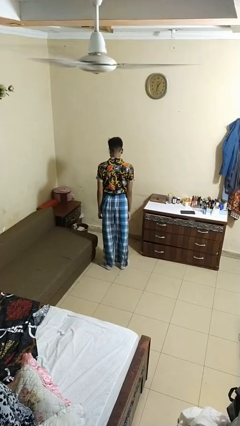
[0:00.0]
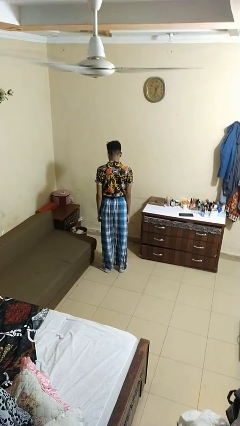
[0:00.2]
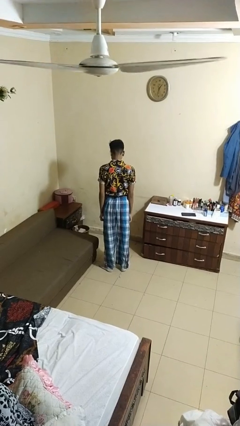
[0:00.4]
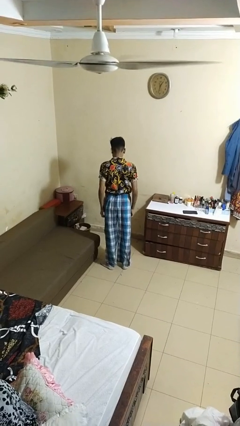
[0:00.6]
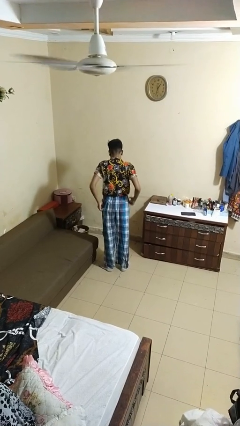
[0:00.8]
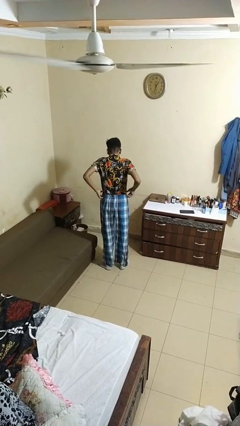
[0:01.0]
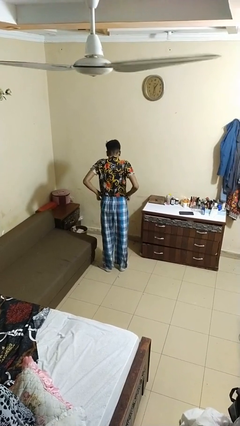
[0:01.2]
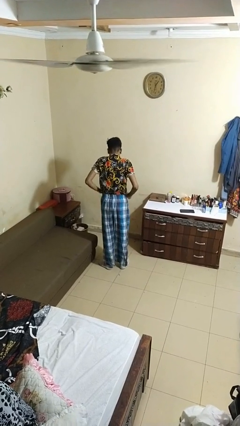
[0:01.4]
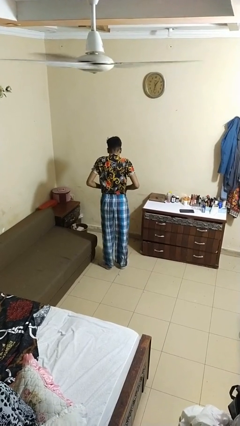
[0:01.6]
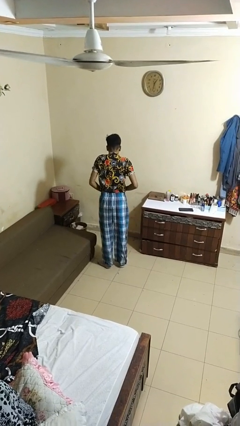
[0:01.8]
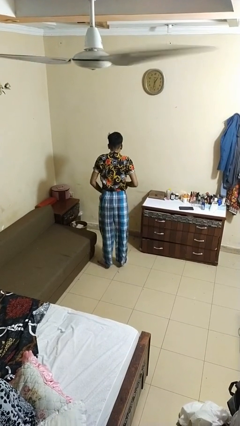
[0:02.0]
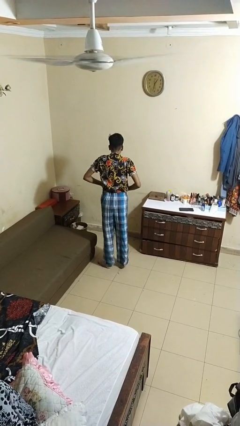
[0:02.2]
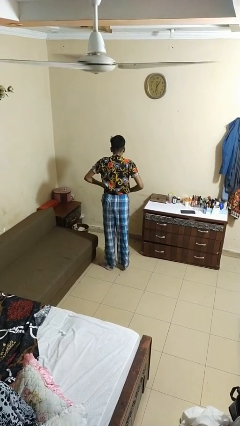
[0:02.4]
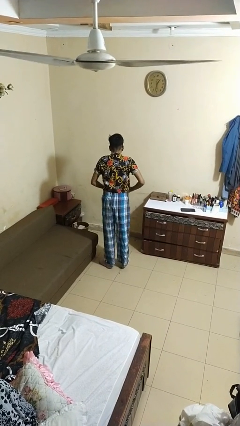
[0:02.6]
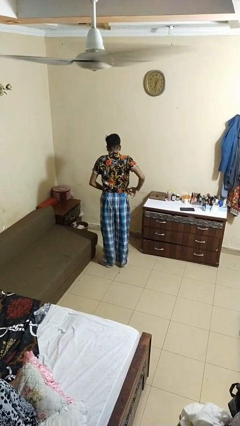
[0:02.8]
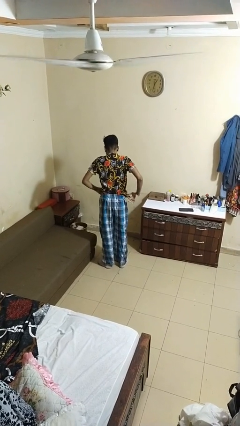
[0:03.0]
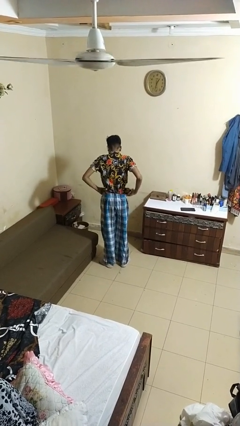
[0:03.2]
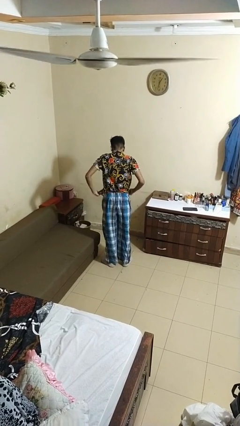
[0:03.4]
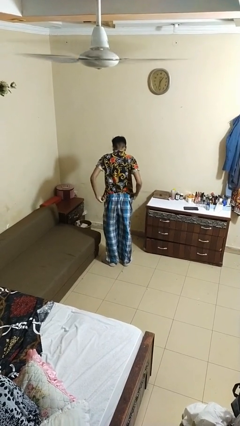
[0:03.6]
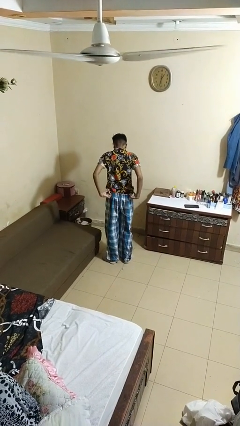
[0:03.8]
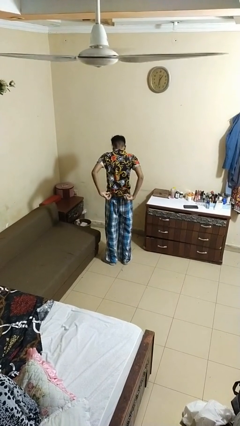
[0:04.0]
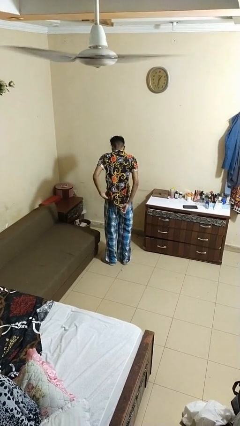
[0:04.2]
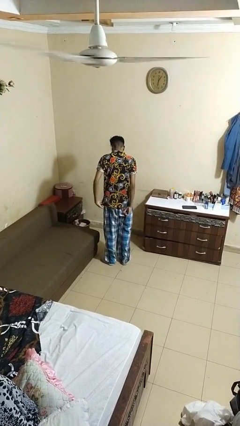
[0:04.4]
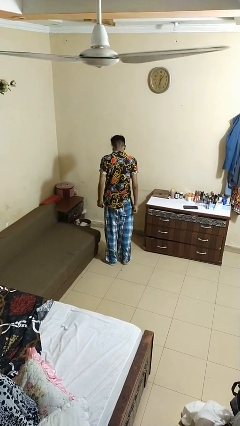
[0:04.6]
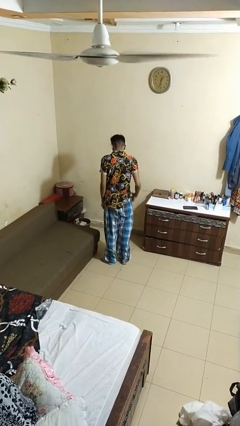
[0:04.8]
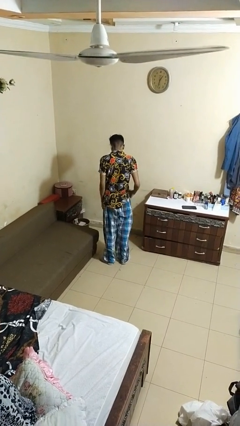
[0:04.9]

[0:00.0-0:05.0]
person untucks shirt

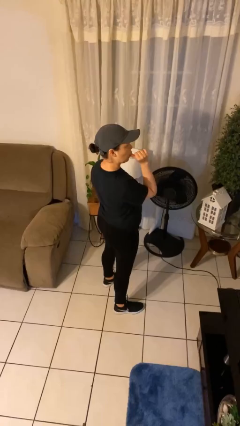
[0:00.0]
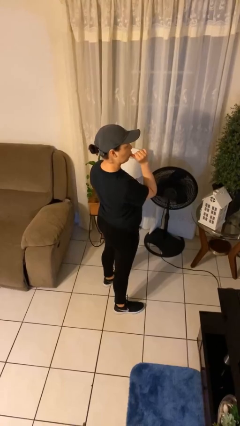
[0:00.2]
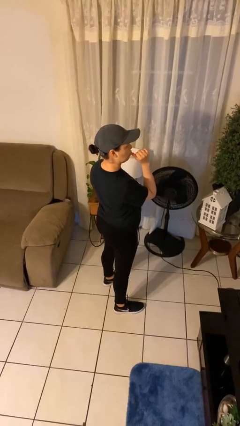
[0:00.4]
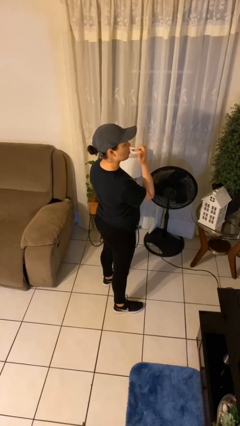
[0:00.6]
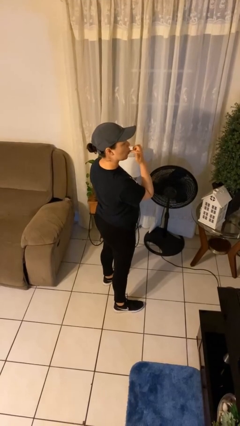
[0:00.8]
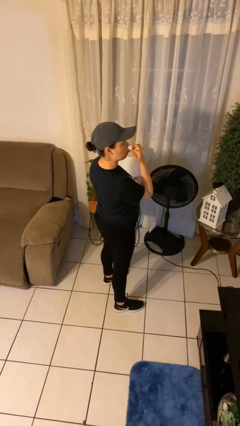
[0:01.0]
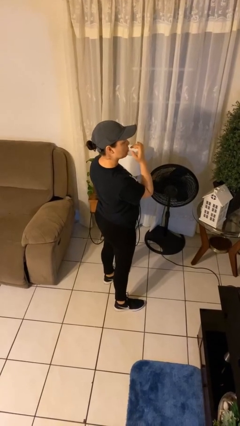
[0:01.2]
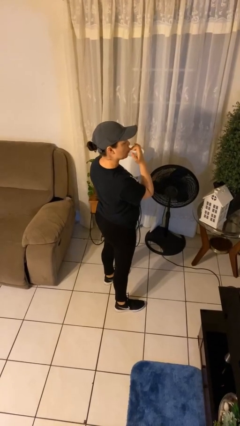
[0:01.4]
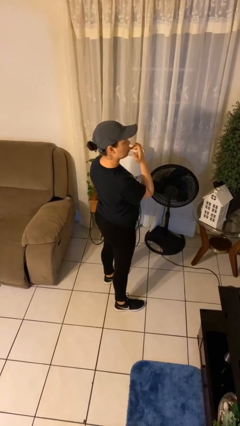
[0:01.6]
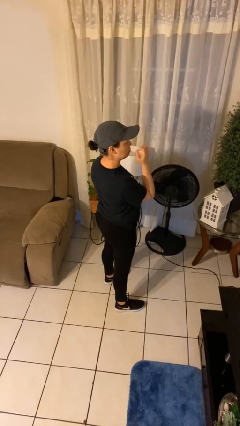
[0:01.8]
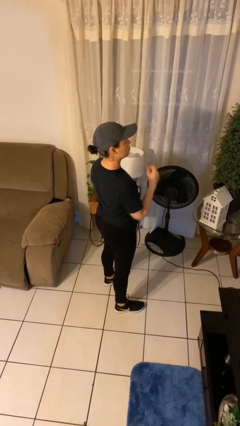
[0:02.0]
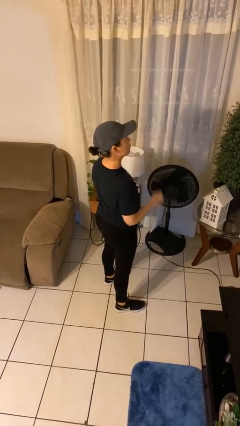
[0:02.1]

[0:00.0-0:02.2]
person licks fingers

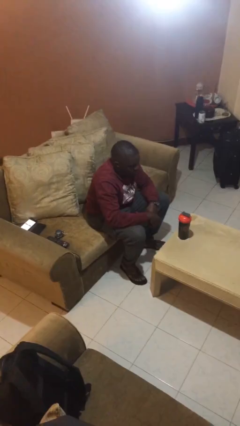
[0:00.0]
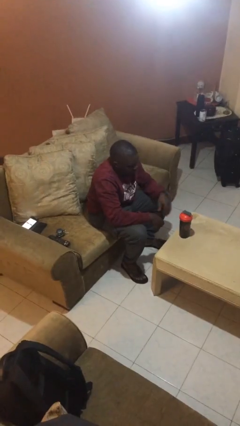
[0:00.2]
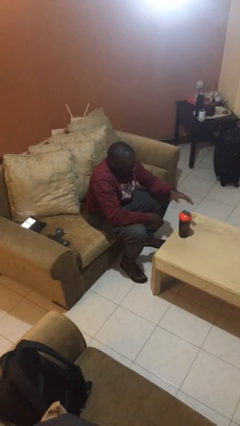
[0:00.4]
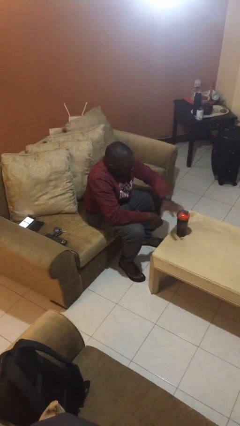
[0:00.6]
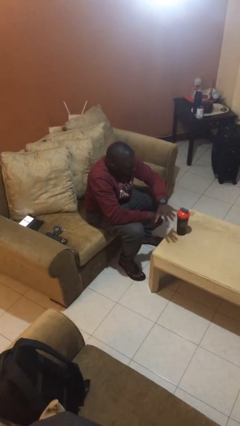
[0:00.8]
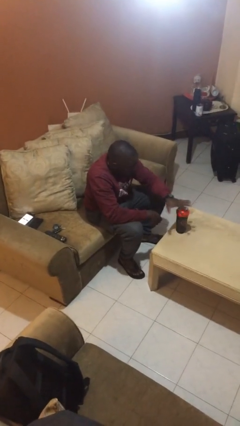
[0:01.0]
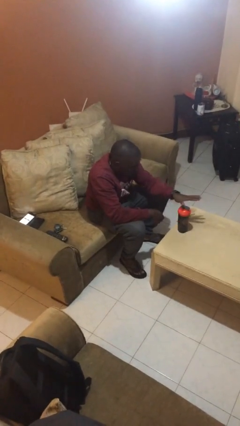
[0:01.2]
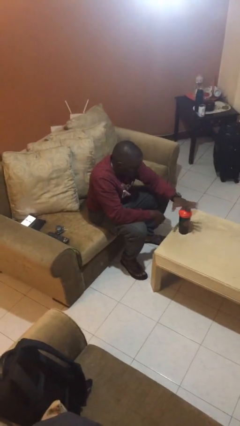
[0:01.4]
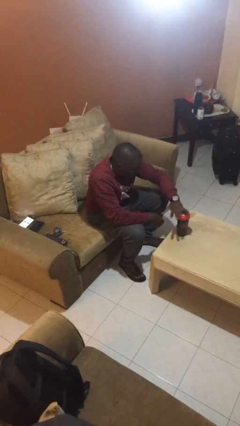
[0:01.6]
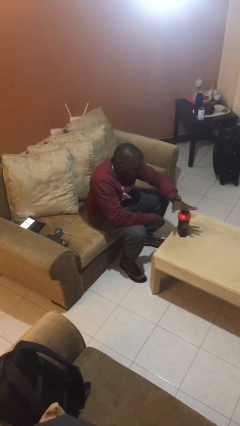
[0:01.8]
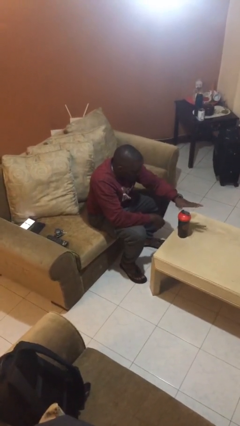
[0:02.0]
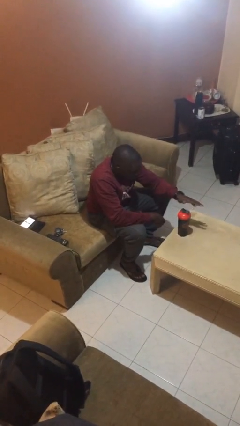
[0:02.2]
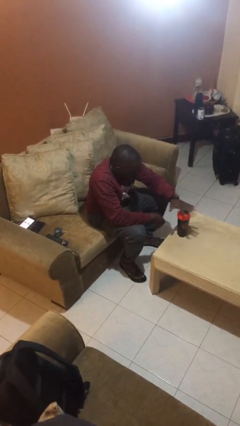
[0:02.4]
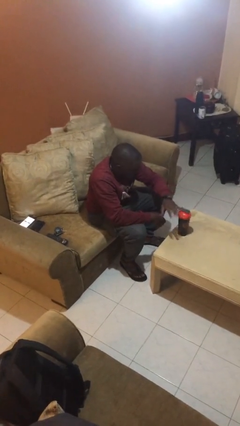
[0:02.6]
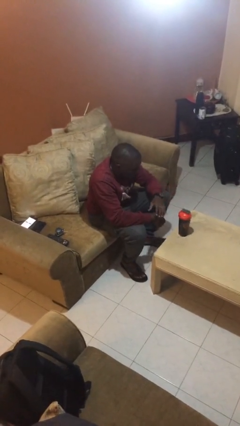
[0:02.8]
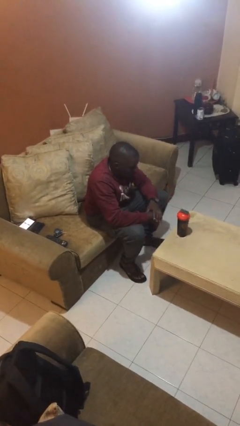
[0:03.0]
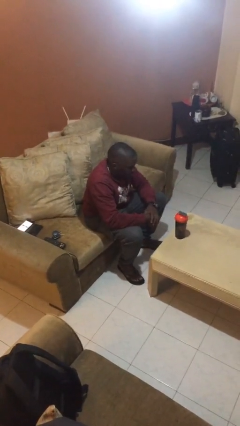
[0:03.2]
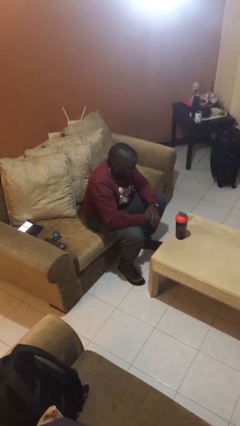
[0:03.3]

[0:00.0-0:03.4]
person waves hand over object

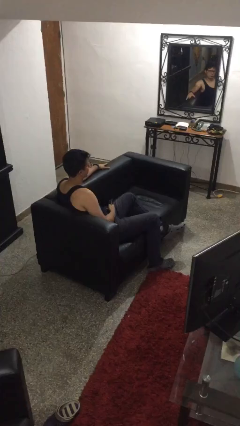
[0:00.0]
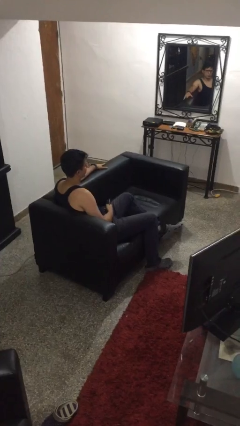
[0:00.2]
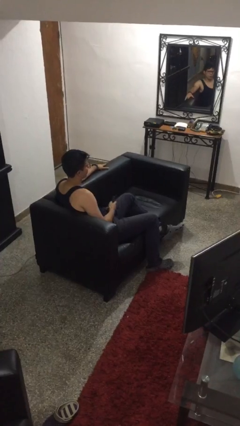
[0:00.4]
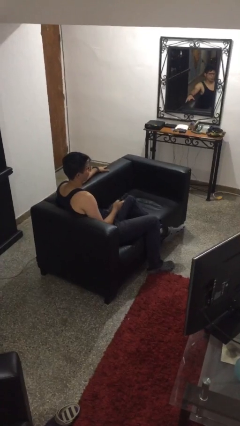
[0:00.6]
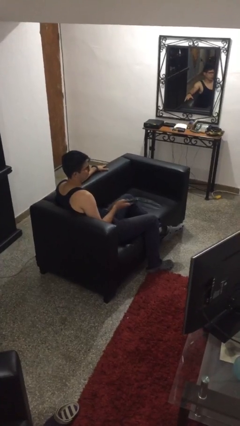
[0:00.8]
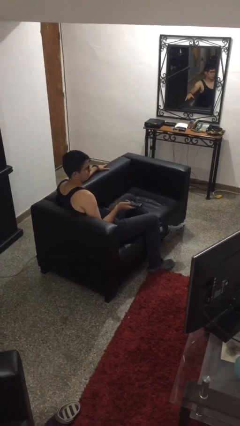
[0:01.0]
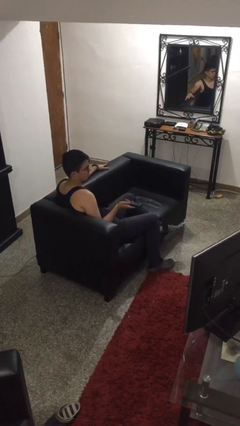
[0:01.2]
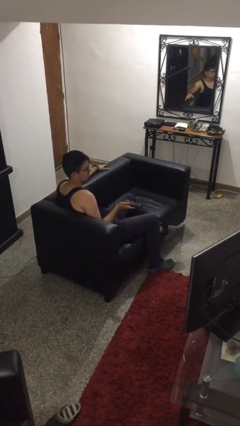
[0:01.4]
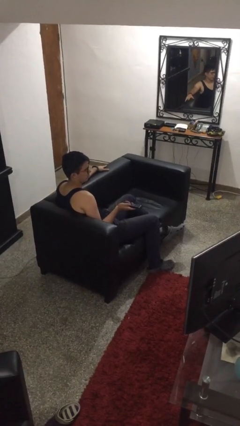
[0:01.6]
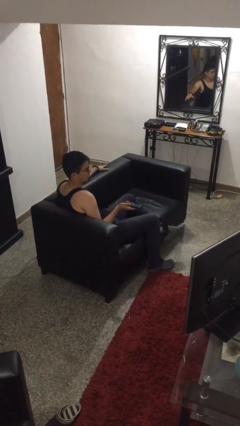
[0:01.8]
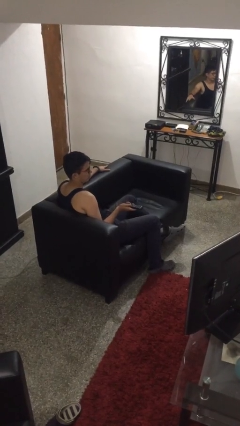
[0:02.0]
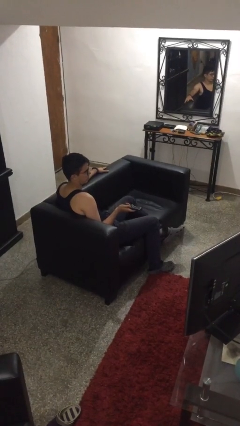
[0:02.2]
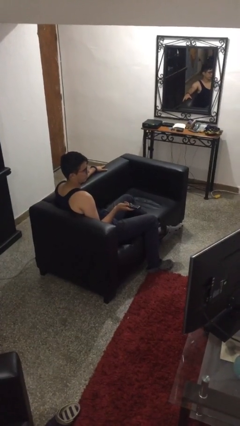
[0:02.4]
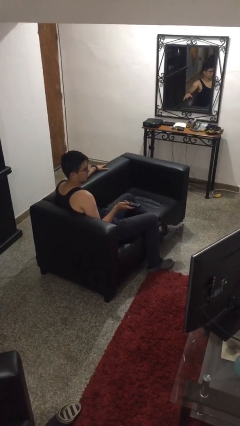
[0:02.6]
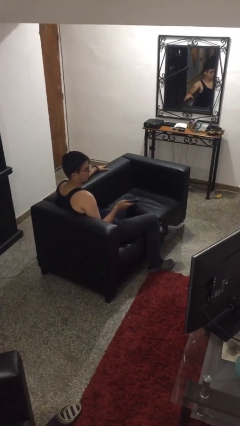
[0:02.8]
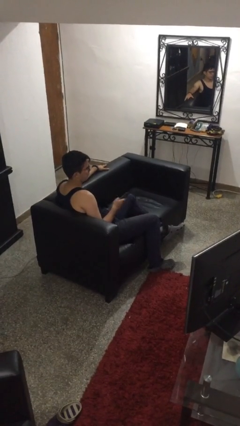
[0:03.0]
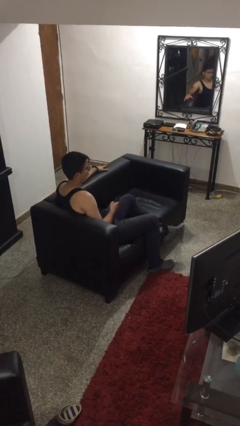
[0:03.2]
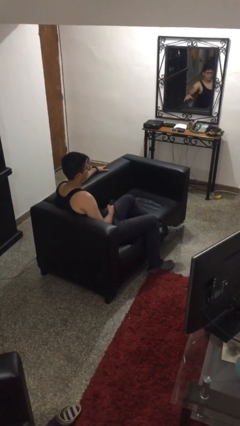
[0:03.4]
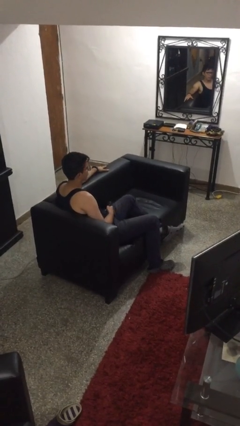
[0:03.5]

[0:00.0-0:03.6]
person uses television remote

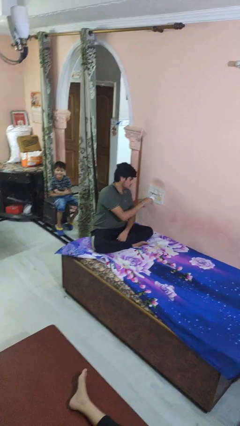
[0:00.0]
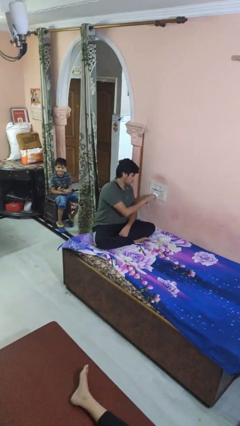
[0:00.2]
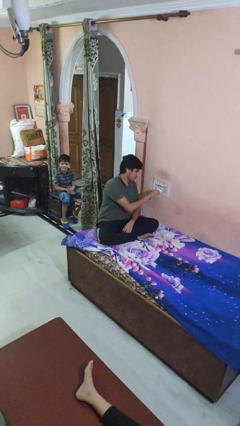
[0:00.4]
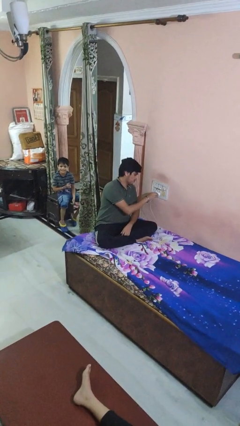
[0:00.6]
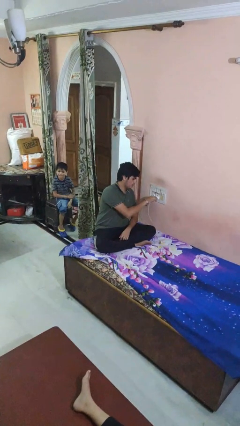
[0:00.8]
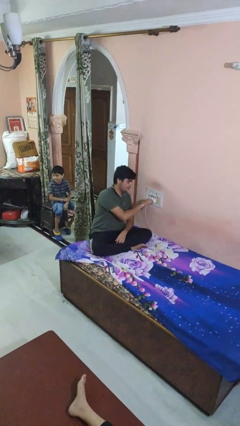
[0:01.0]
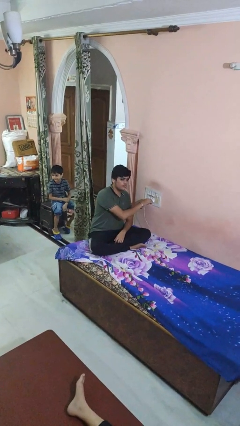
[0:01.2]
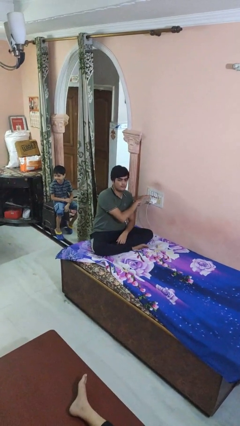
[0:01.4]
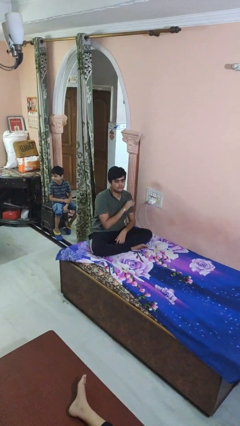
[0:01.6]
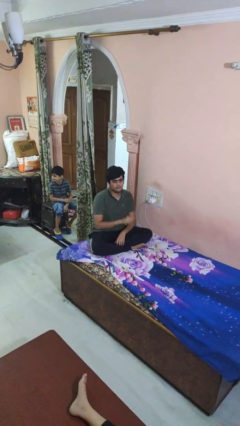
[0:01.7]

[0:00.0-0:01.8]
person plugs into electrical socket

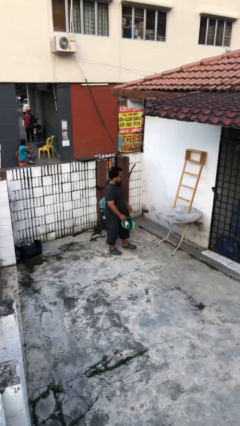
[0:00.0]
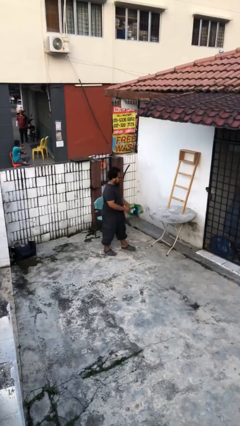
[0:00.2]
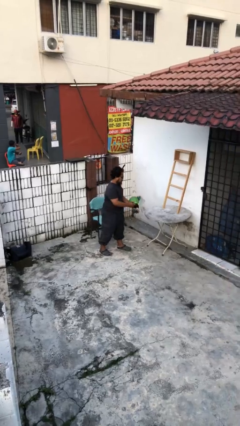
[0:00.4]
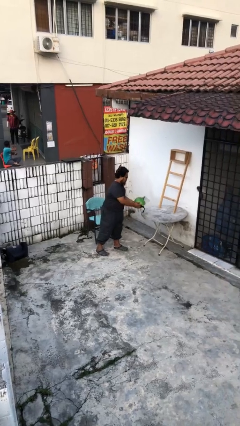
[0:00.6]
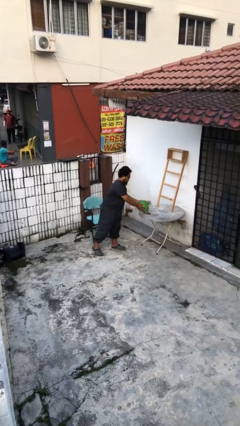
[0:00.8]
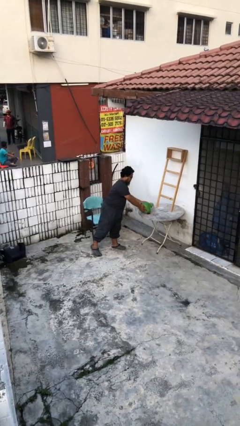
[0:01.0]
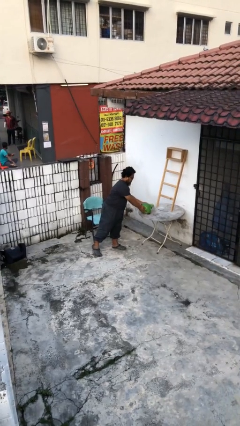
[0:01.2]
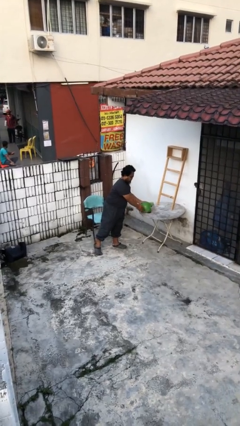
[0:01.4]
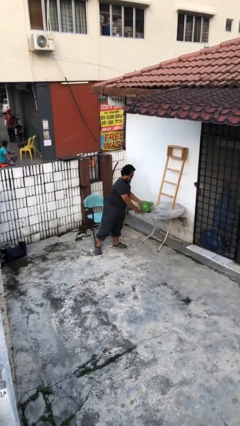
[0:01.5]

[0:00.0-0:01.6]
person puts down object on table
